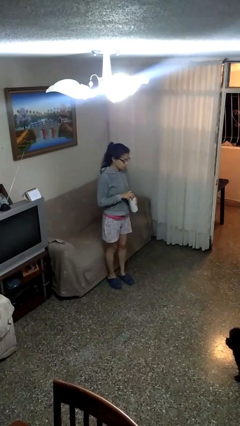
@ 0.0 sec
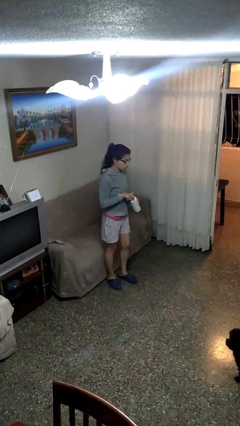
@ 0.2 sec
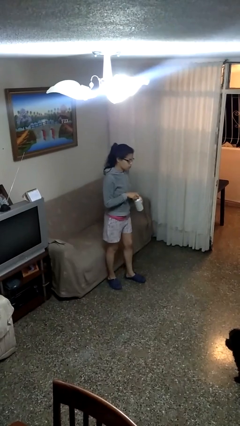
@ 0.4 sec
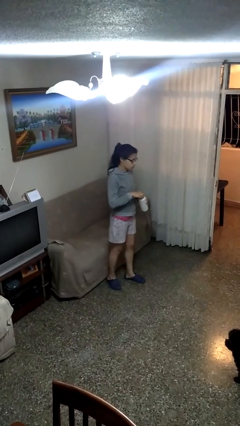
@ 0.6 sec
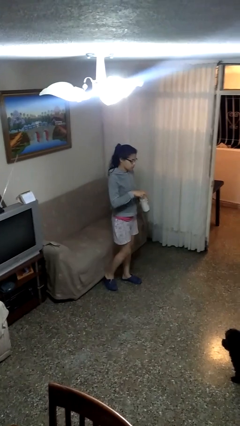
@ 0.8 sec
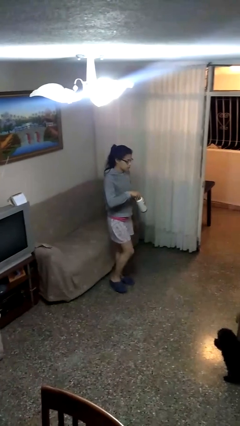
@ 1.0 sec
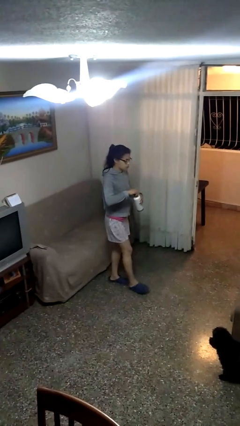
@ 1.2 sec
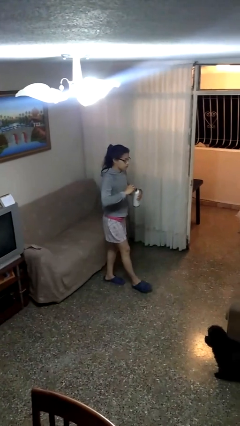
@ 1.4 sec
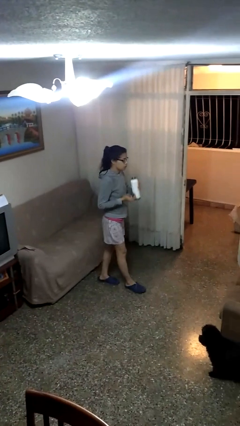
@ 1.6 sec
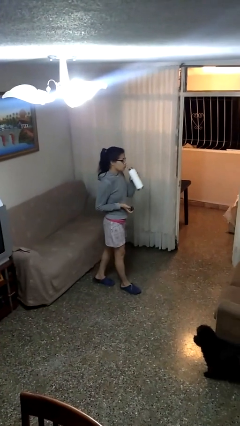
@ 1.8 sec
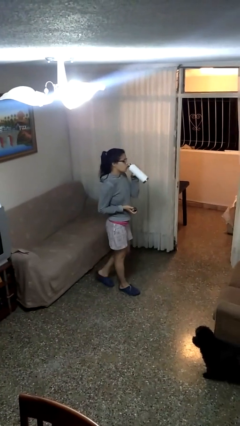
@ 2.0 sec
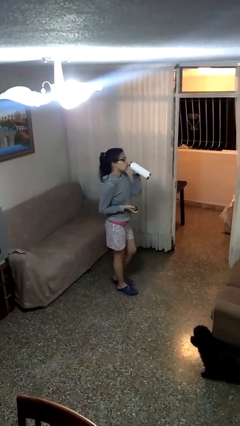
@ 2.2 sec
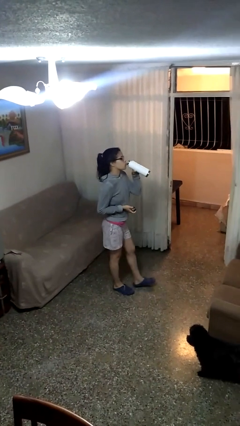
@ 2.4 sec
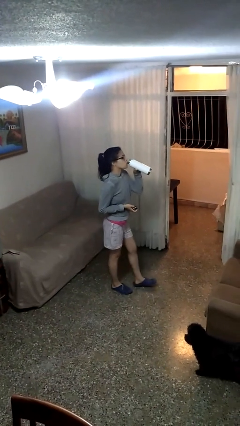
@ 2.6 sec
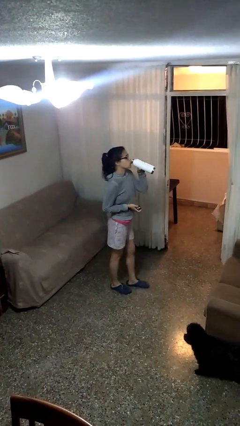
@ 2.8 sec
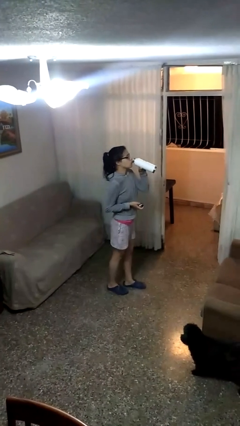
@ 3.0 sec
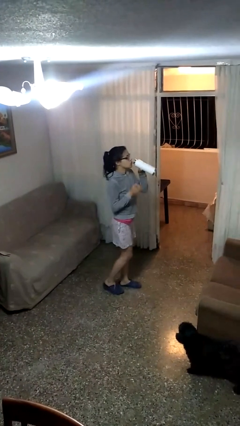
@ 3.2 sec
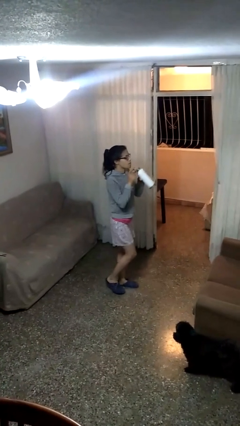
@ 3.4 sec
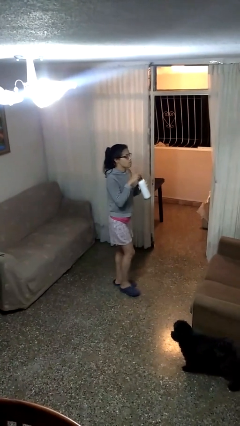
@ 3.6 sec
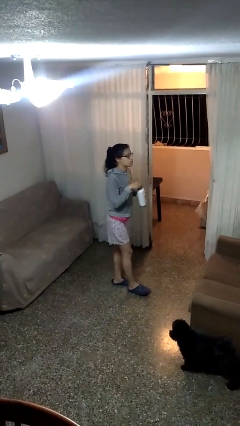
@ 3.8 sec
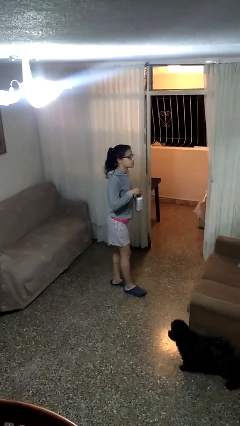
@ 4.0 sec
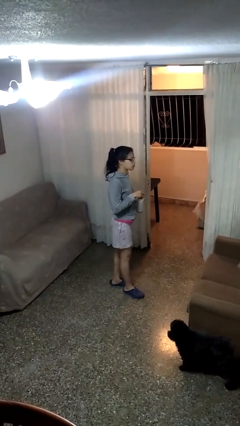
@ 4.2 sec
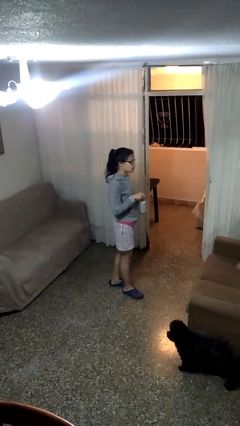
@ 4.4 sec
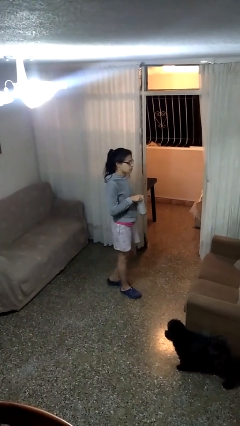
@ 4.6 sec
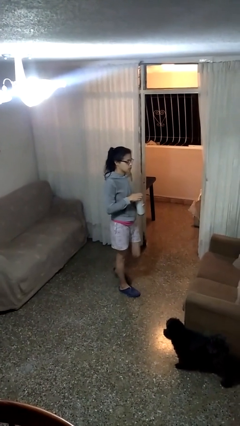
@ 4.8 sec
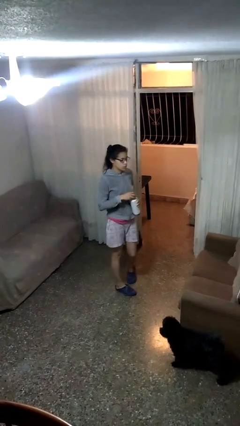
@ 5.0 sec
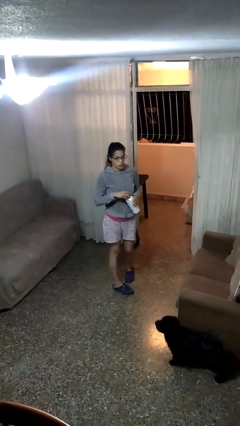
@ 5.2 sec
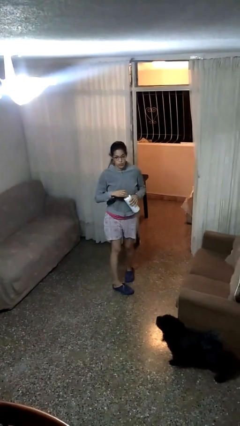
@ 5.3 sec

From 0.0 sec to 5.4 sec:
person drinks from bottle

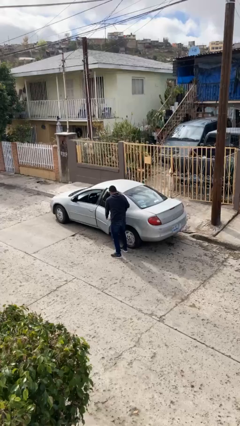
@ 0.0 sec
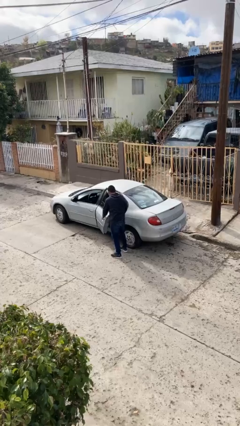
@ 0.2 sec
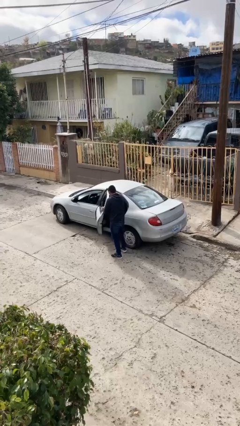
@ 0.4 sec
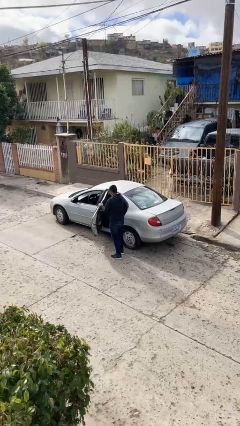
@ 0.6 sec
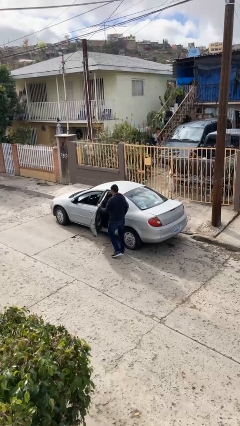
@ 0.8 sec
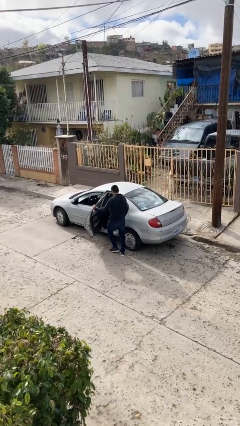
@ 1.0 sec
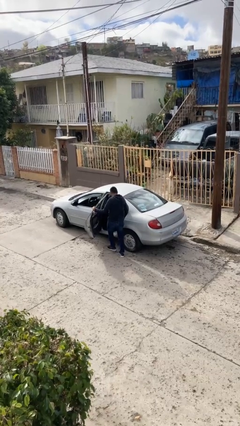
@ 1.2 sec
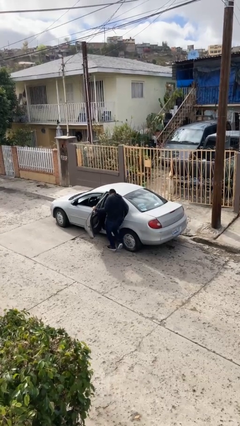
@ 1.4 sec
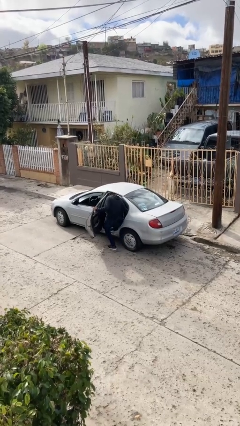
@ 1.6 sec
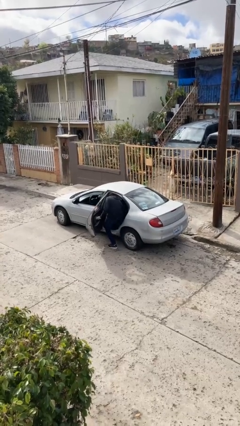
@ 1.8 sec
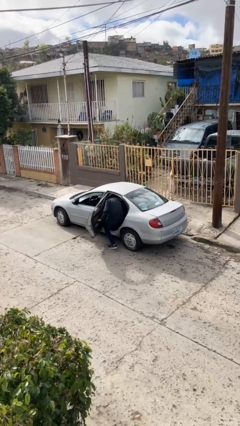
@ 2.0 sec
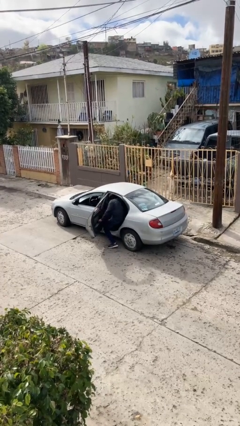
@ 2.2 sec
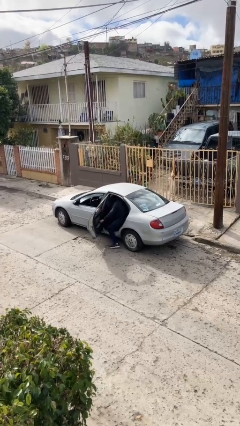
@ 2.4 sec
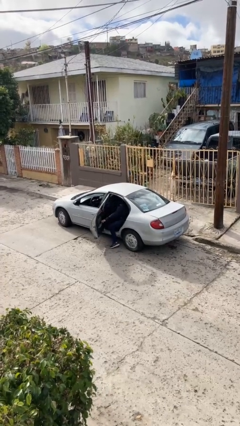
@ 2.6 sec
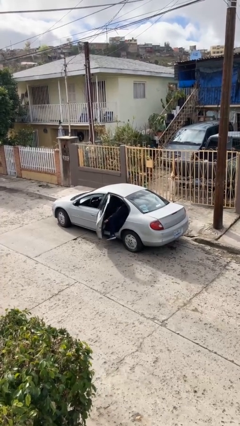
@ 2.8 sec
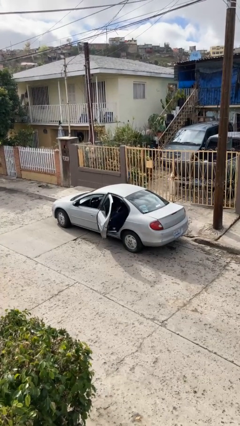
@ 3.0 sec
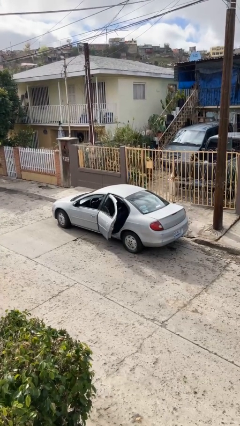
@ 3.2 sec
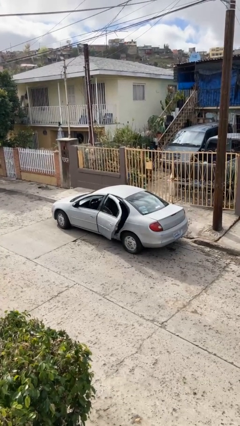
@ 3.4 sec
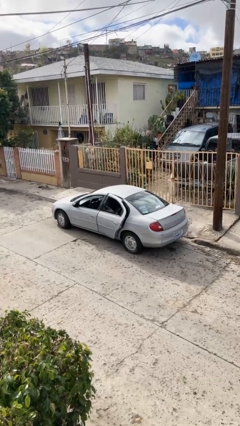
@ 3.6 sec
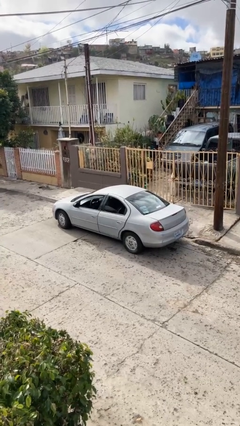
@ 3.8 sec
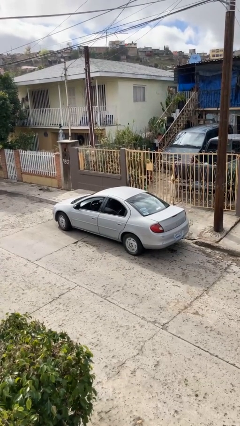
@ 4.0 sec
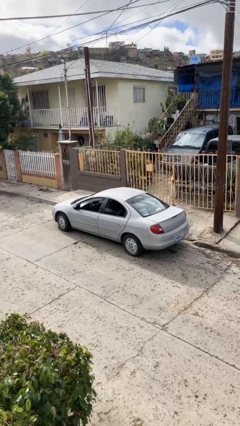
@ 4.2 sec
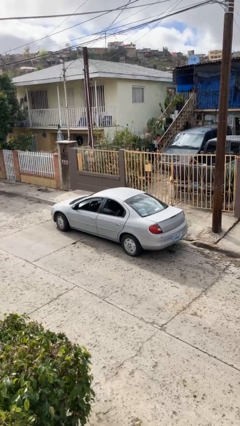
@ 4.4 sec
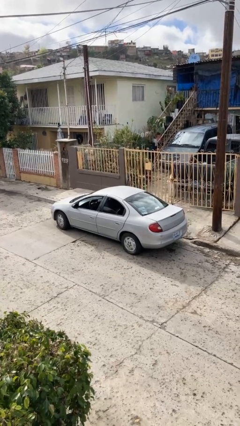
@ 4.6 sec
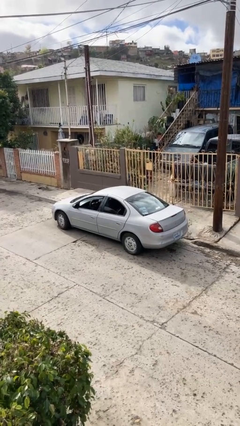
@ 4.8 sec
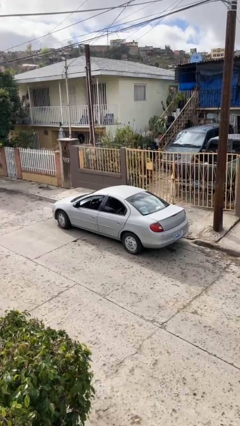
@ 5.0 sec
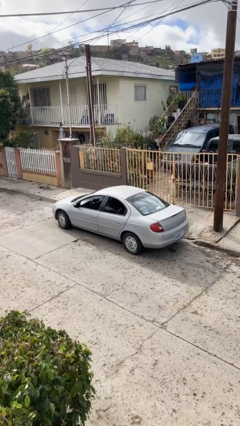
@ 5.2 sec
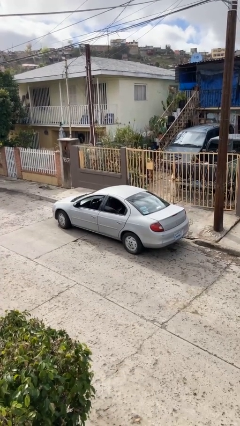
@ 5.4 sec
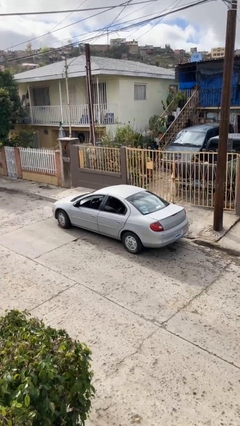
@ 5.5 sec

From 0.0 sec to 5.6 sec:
car picks up person

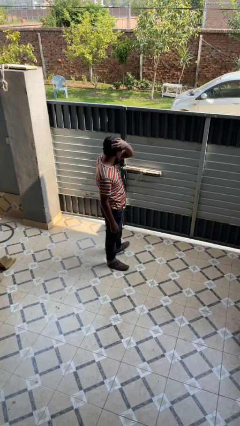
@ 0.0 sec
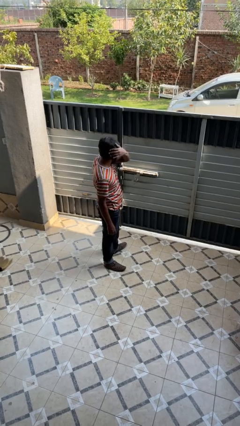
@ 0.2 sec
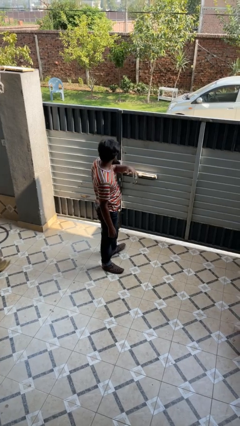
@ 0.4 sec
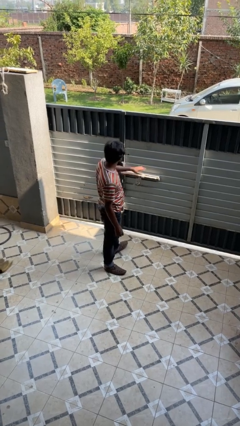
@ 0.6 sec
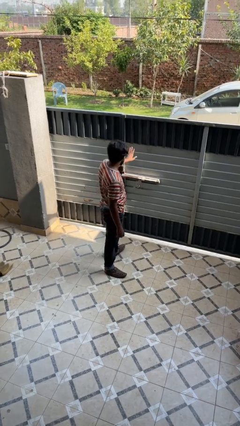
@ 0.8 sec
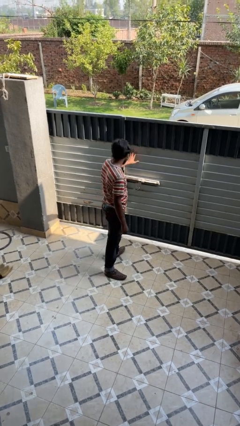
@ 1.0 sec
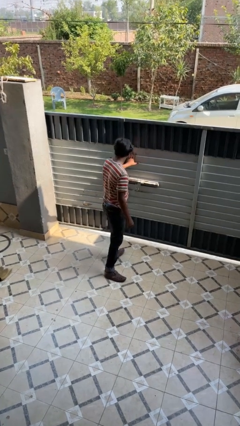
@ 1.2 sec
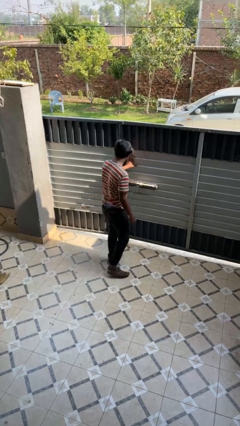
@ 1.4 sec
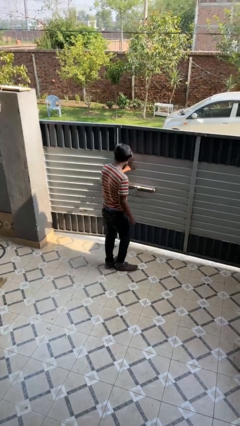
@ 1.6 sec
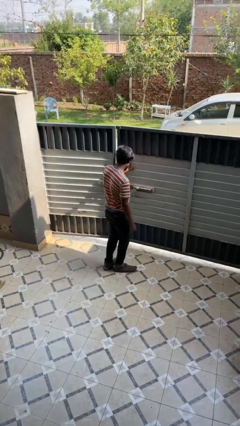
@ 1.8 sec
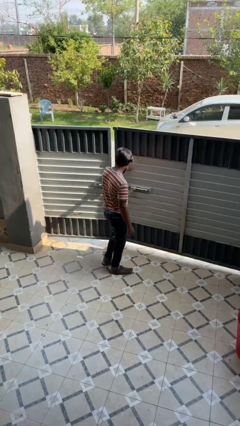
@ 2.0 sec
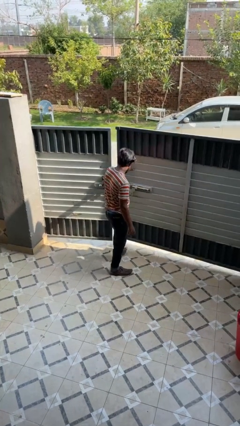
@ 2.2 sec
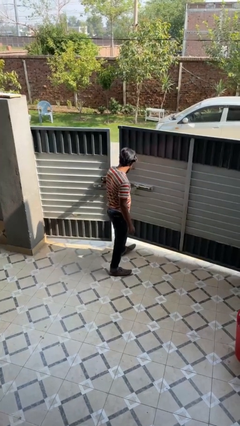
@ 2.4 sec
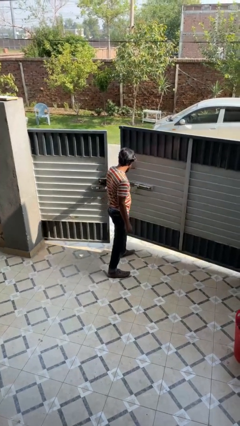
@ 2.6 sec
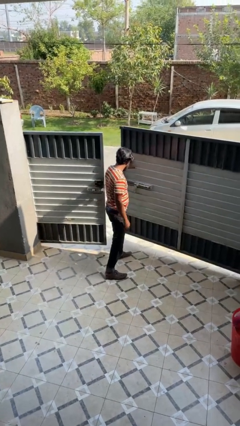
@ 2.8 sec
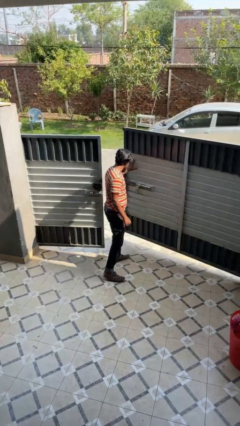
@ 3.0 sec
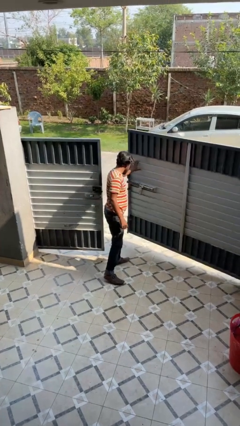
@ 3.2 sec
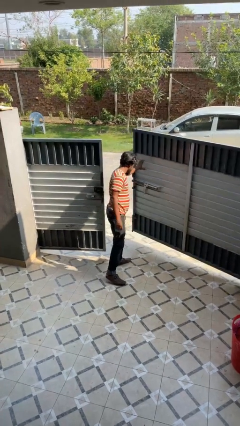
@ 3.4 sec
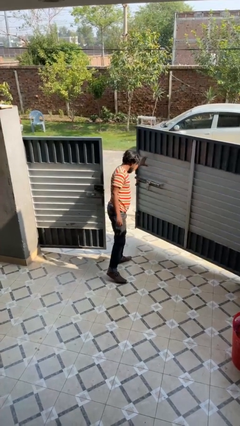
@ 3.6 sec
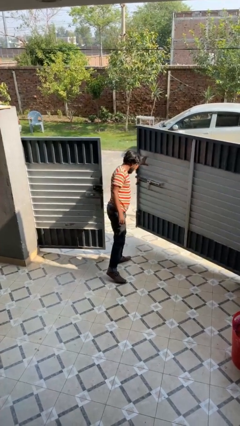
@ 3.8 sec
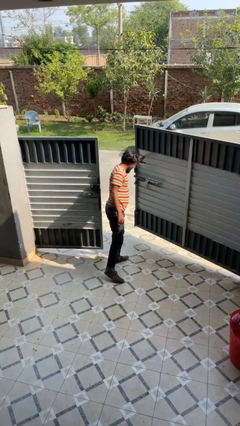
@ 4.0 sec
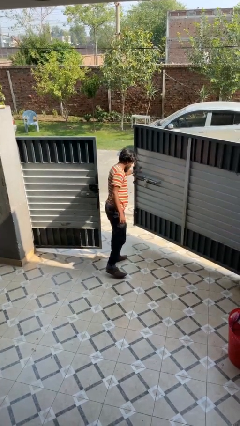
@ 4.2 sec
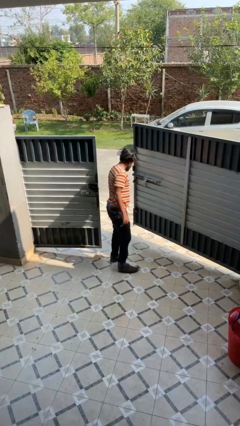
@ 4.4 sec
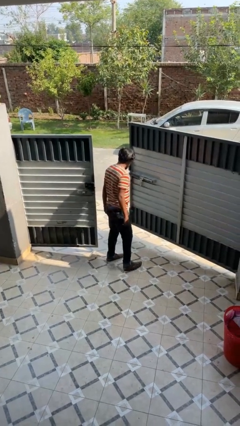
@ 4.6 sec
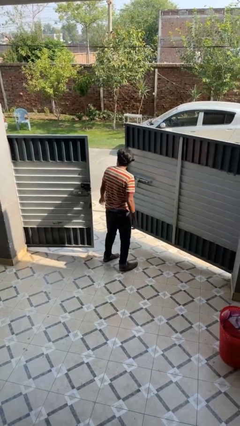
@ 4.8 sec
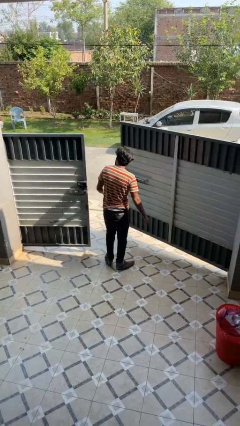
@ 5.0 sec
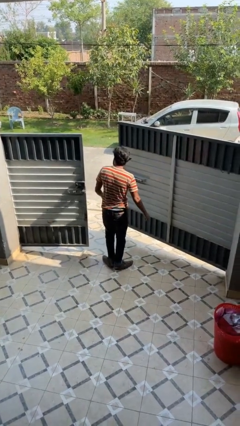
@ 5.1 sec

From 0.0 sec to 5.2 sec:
person opens gate

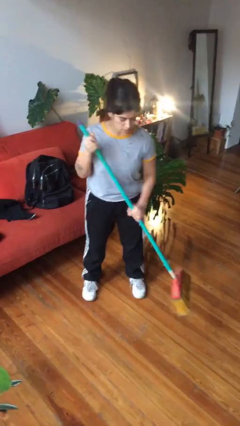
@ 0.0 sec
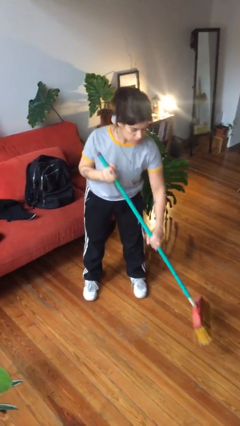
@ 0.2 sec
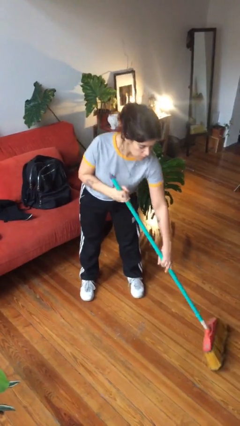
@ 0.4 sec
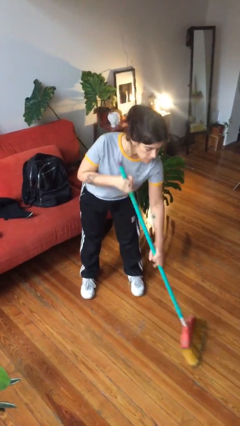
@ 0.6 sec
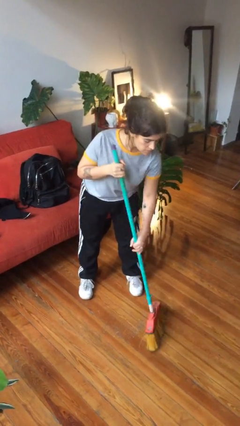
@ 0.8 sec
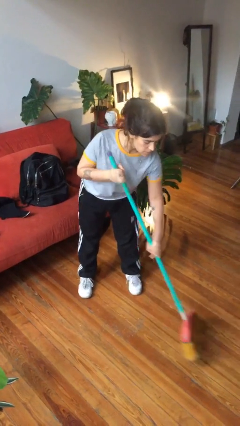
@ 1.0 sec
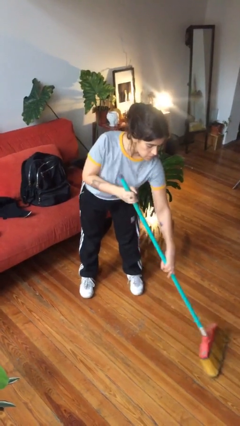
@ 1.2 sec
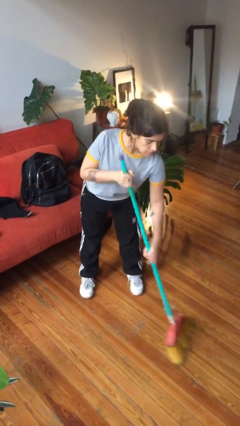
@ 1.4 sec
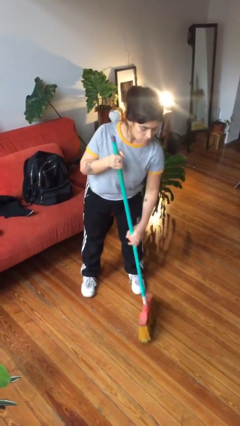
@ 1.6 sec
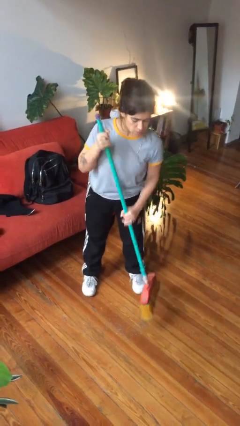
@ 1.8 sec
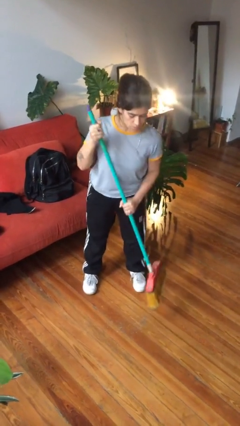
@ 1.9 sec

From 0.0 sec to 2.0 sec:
person sweeps floor
